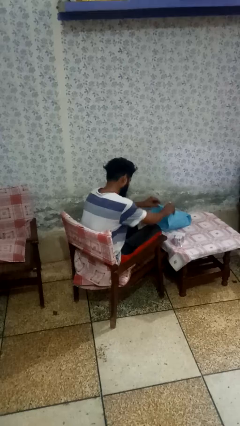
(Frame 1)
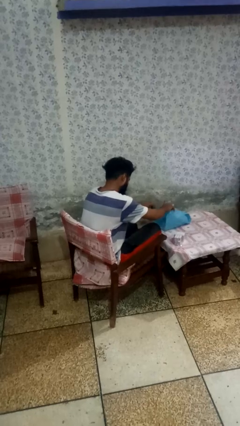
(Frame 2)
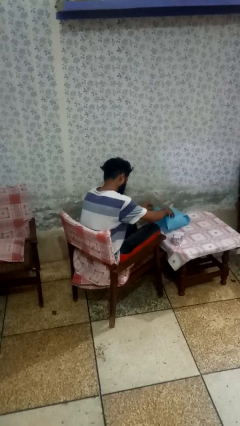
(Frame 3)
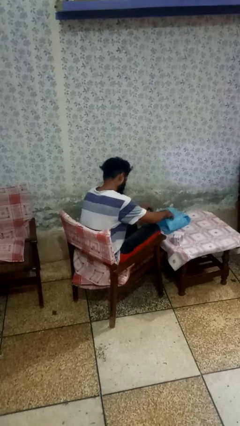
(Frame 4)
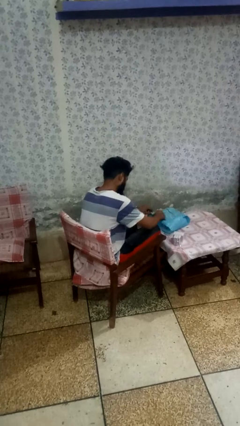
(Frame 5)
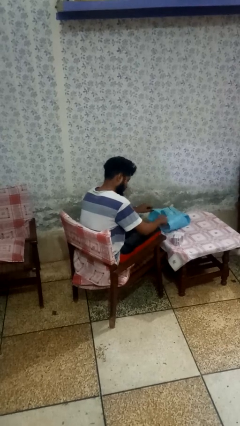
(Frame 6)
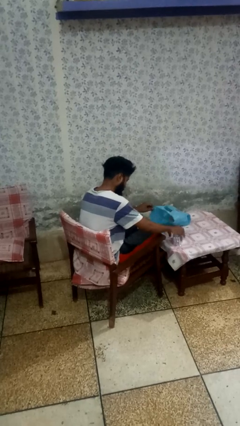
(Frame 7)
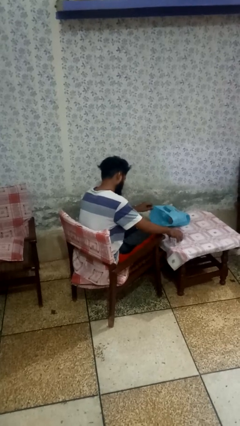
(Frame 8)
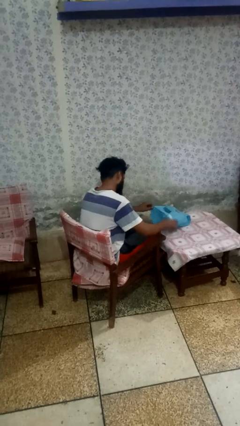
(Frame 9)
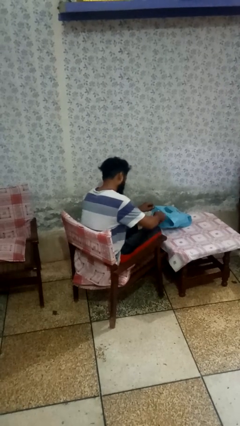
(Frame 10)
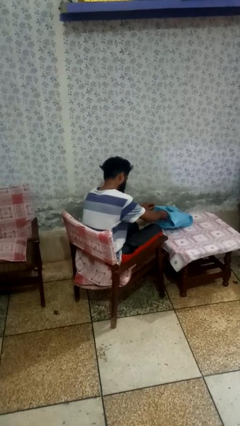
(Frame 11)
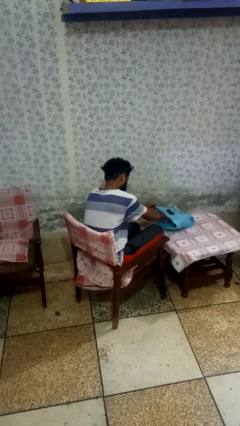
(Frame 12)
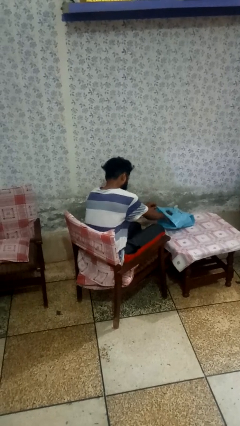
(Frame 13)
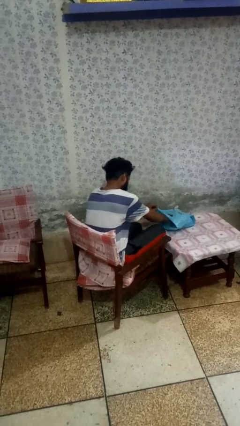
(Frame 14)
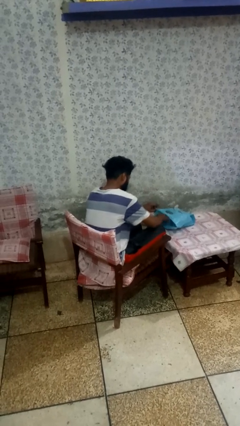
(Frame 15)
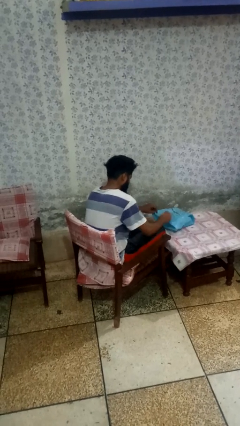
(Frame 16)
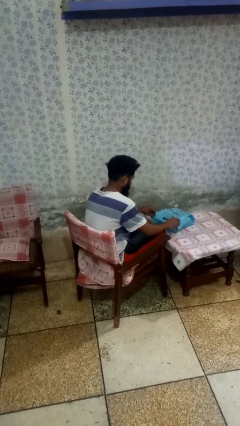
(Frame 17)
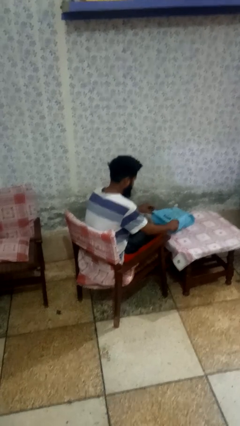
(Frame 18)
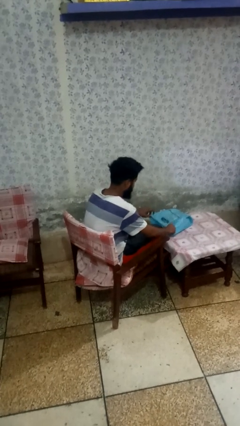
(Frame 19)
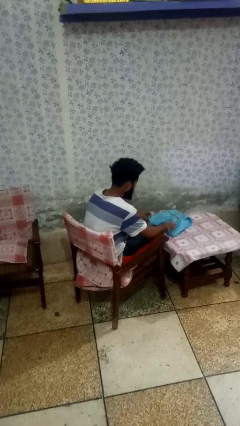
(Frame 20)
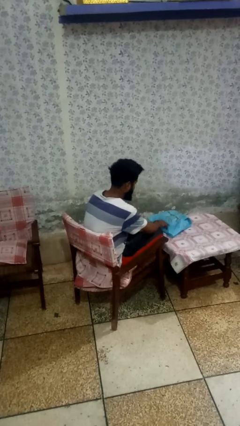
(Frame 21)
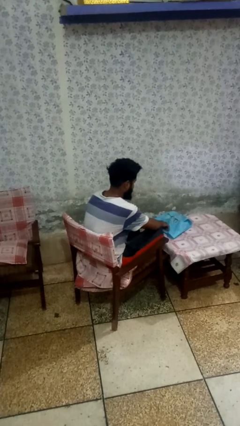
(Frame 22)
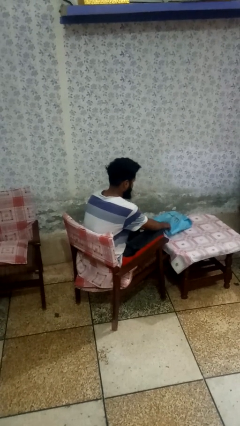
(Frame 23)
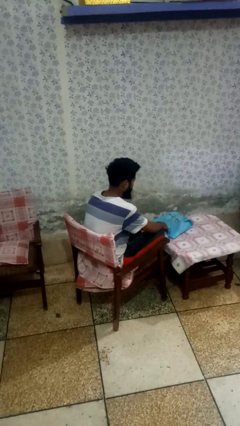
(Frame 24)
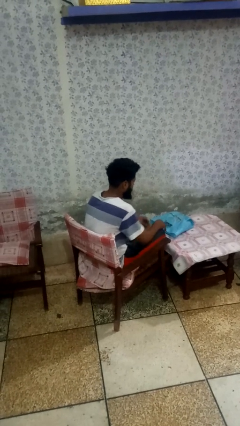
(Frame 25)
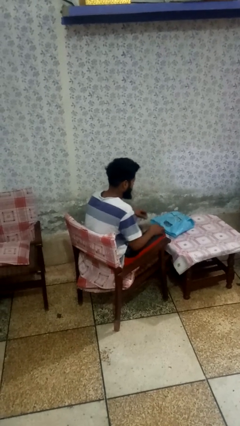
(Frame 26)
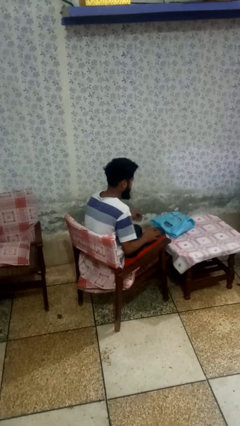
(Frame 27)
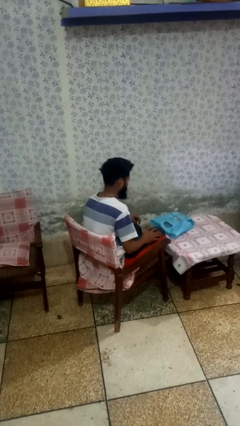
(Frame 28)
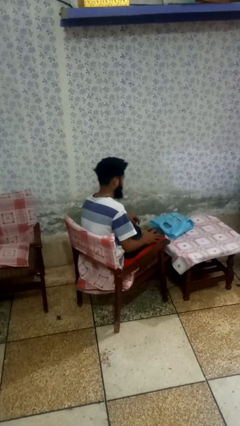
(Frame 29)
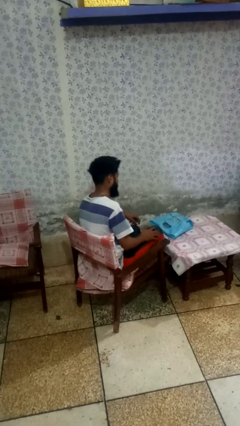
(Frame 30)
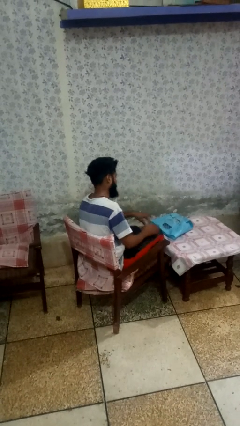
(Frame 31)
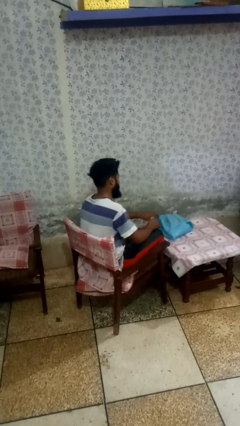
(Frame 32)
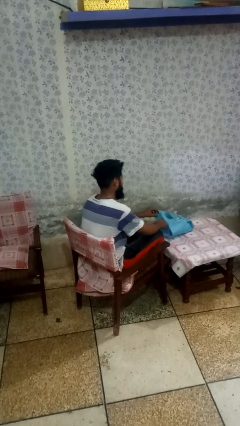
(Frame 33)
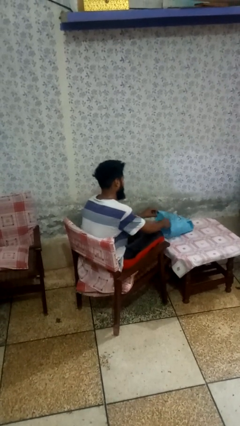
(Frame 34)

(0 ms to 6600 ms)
person puts object into bag

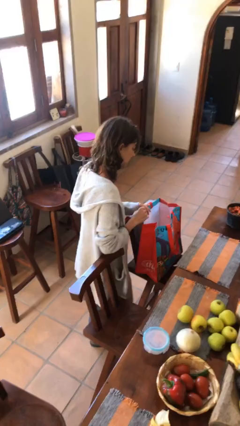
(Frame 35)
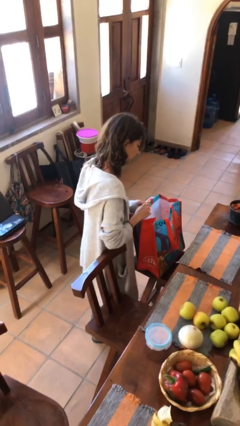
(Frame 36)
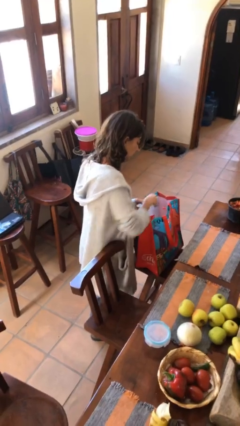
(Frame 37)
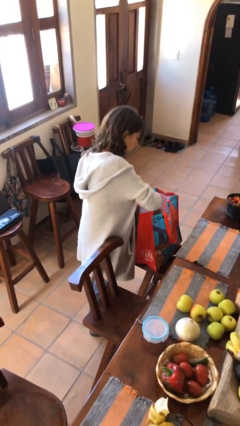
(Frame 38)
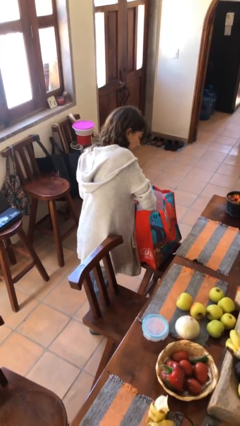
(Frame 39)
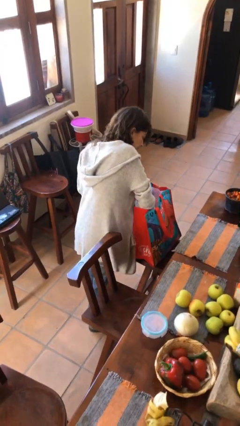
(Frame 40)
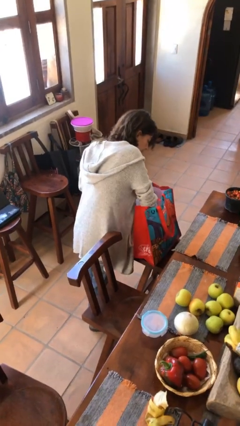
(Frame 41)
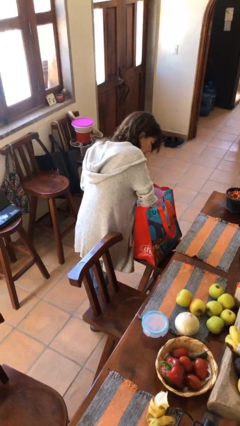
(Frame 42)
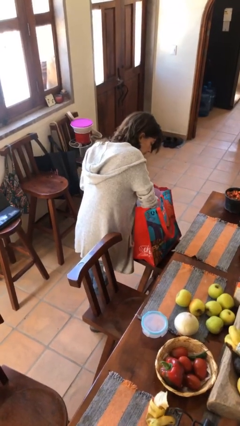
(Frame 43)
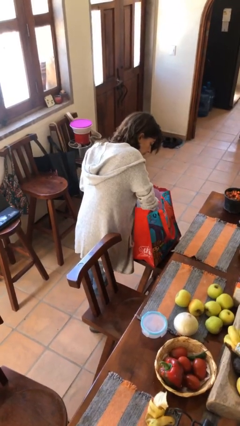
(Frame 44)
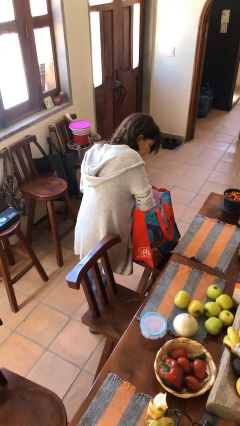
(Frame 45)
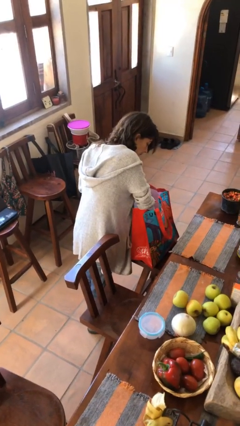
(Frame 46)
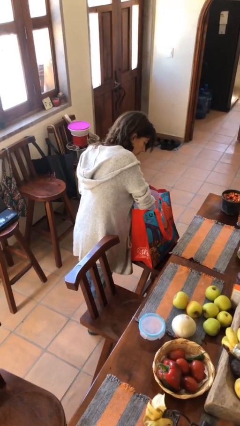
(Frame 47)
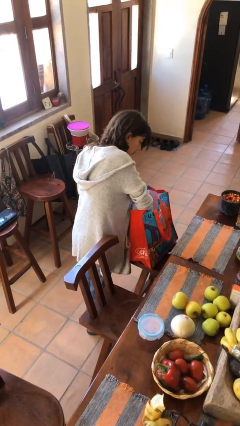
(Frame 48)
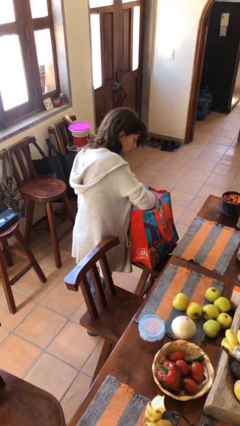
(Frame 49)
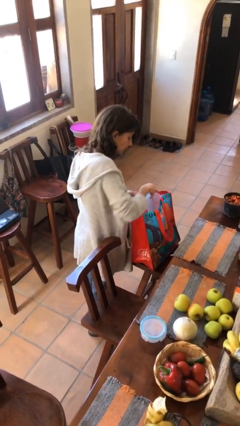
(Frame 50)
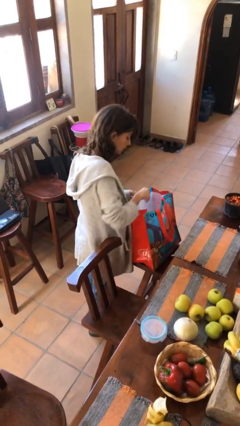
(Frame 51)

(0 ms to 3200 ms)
person searches in bag

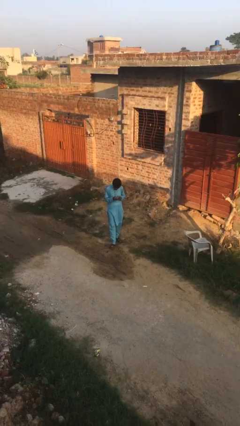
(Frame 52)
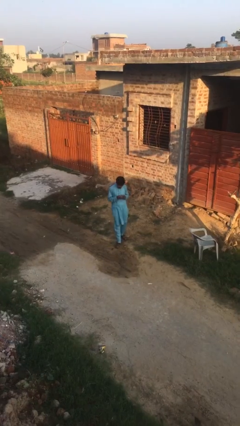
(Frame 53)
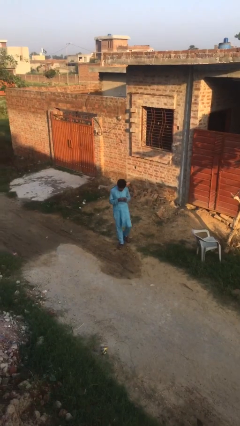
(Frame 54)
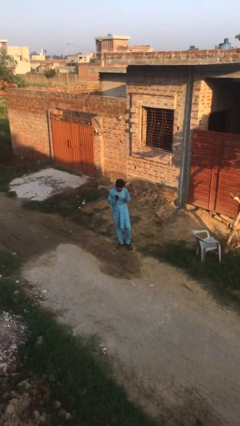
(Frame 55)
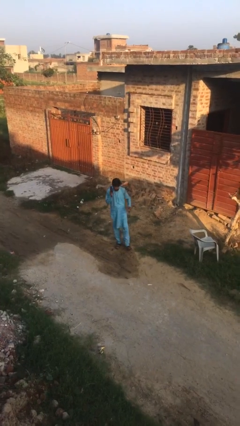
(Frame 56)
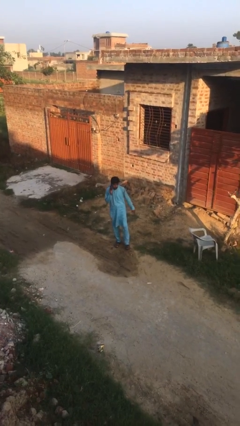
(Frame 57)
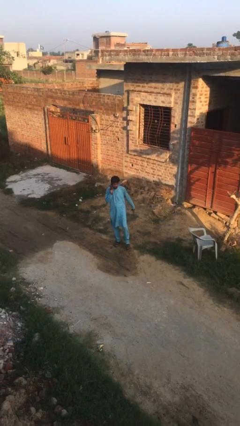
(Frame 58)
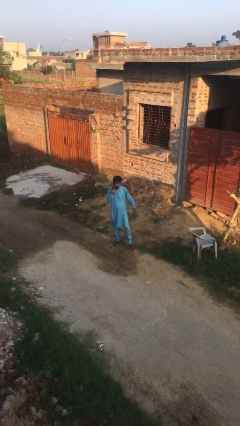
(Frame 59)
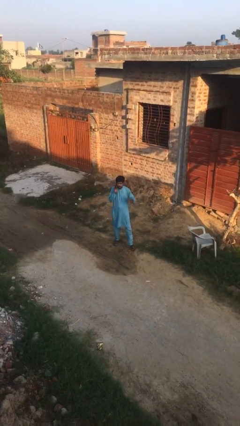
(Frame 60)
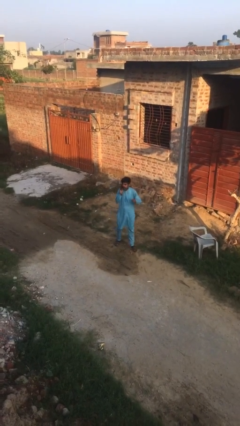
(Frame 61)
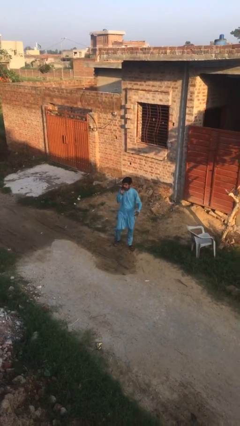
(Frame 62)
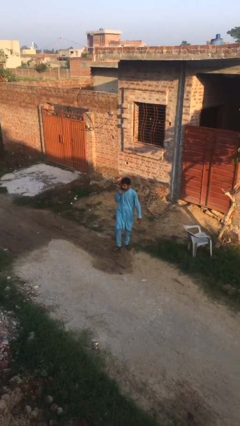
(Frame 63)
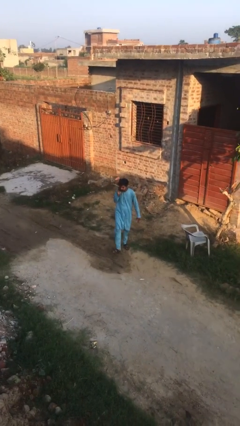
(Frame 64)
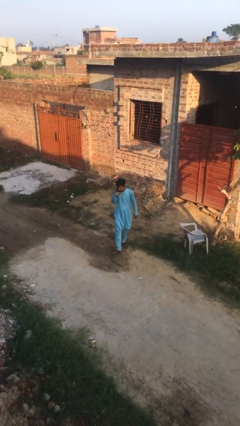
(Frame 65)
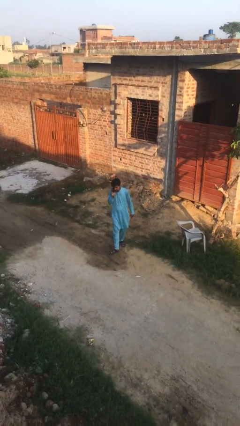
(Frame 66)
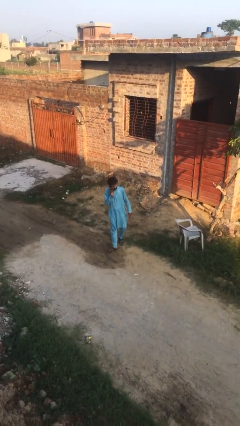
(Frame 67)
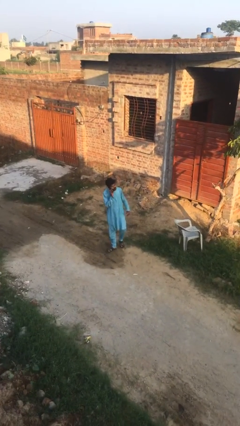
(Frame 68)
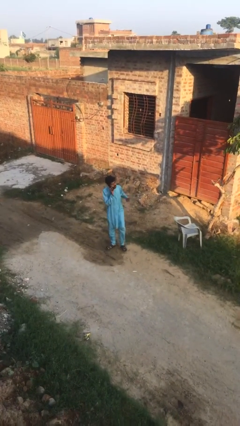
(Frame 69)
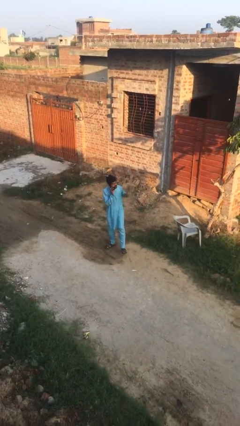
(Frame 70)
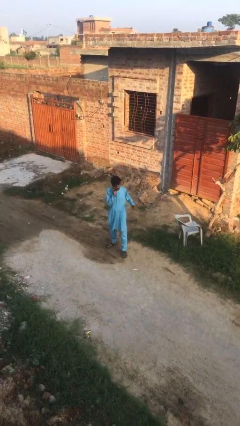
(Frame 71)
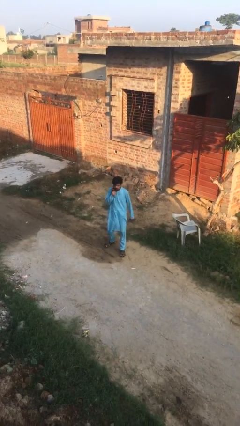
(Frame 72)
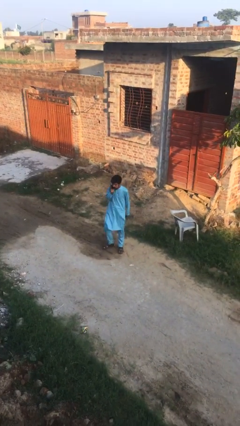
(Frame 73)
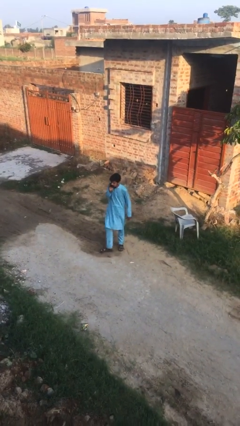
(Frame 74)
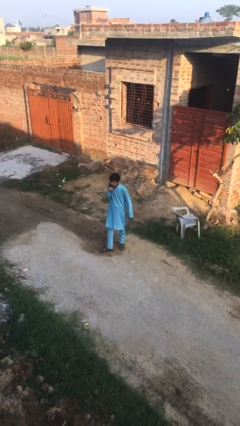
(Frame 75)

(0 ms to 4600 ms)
person talks on phone

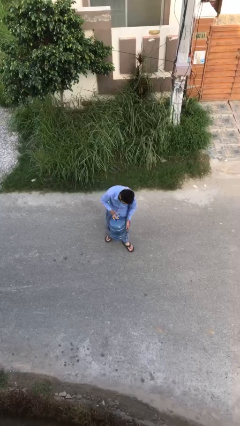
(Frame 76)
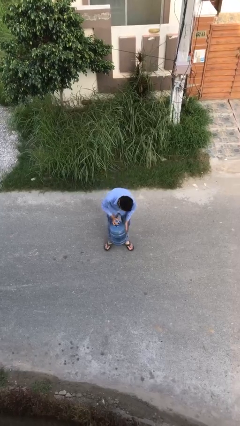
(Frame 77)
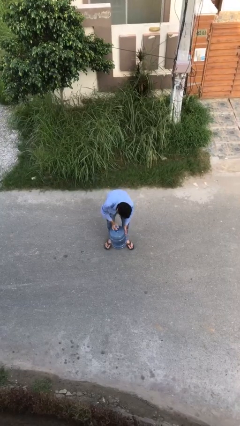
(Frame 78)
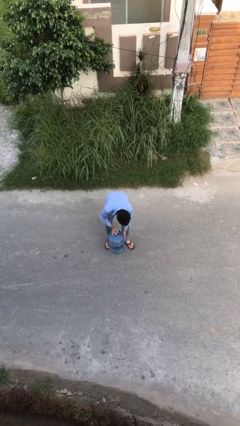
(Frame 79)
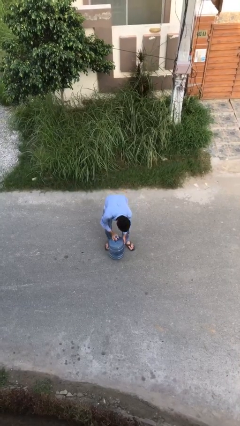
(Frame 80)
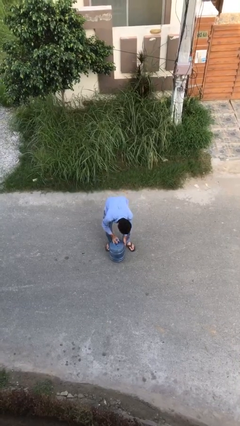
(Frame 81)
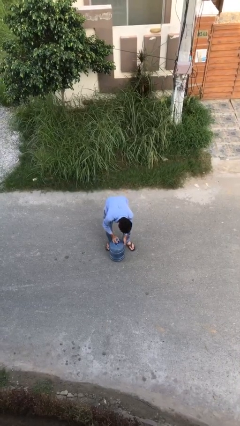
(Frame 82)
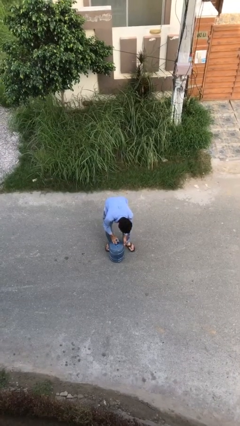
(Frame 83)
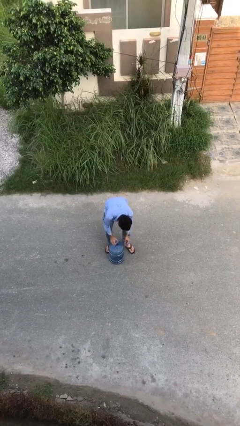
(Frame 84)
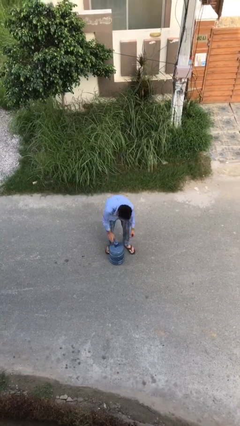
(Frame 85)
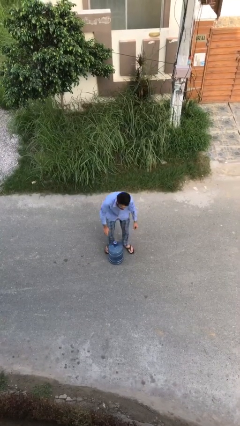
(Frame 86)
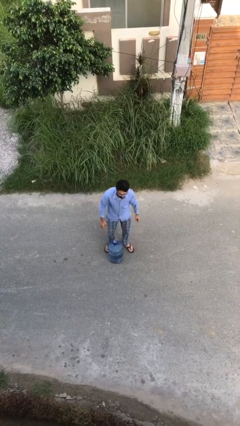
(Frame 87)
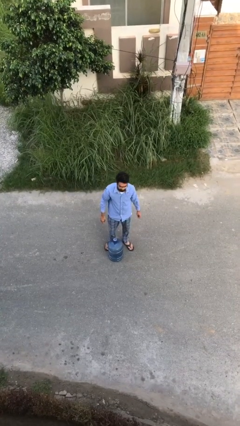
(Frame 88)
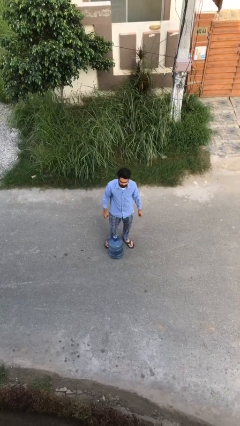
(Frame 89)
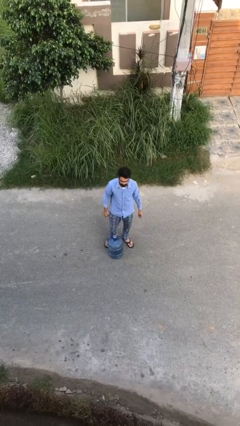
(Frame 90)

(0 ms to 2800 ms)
person puts down object on floor

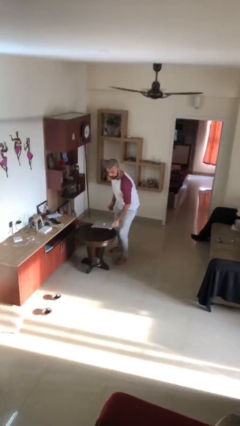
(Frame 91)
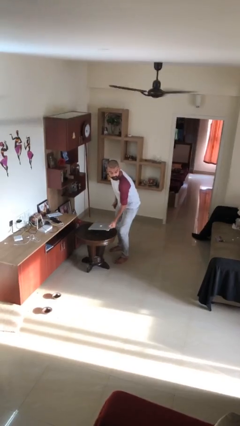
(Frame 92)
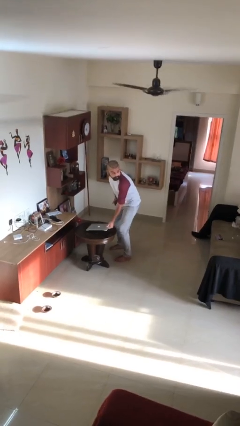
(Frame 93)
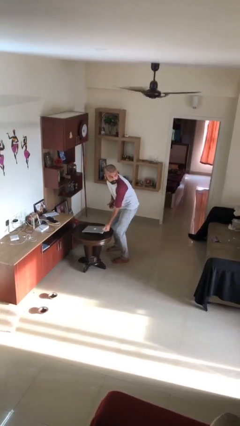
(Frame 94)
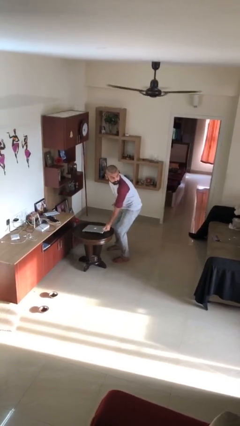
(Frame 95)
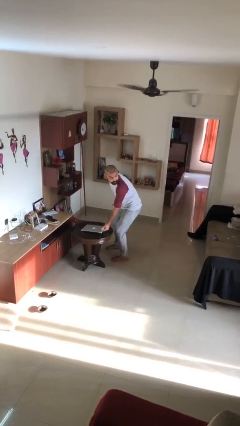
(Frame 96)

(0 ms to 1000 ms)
person puts down object on table
